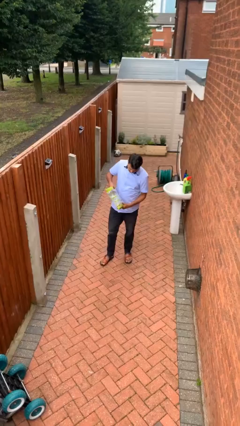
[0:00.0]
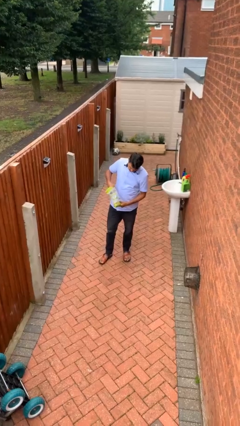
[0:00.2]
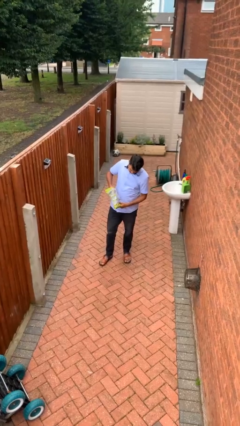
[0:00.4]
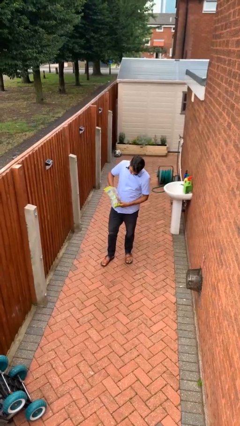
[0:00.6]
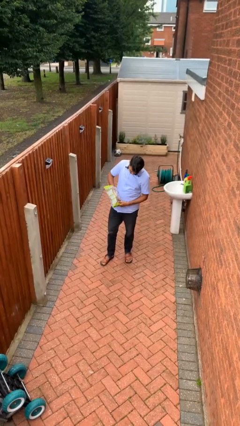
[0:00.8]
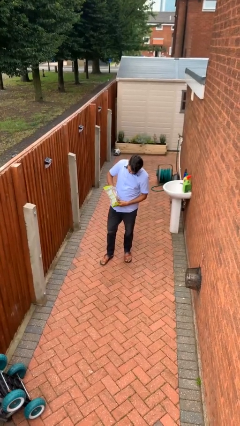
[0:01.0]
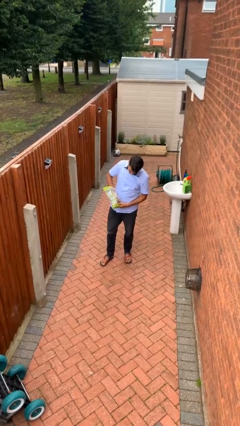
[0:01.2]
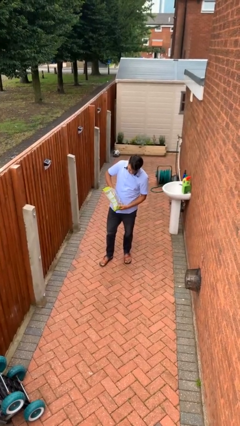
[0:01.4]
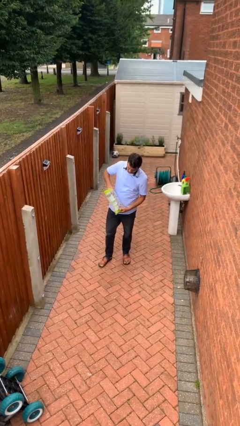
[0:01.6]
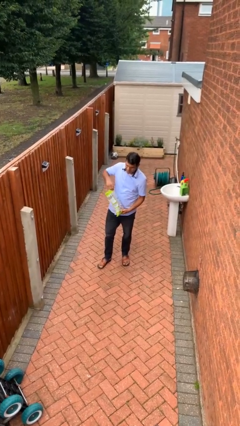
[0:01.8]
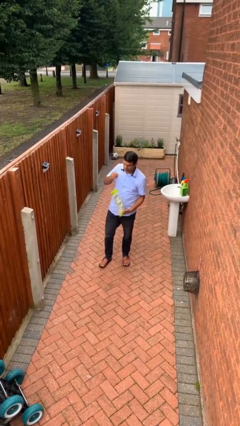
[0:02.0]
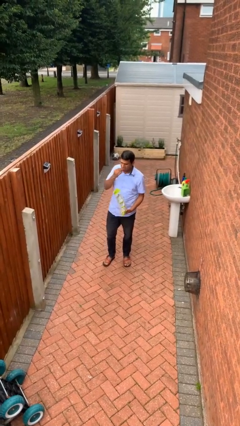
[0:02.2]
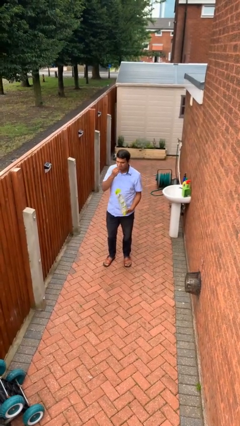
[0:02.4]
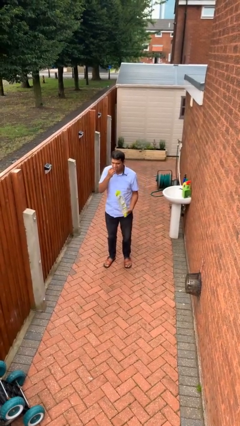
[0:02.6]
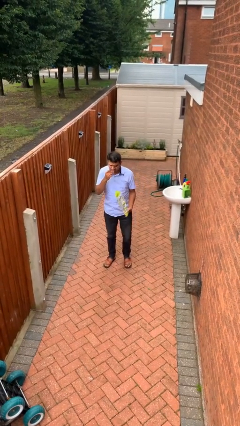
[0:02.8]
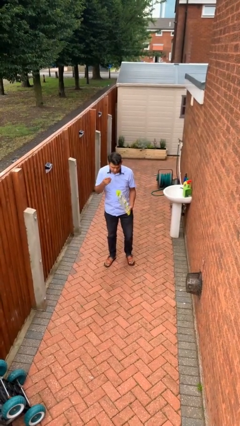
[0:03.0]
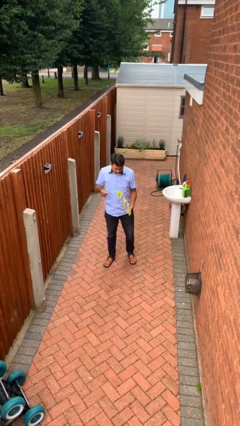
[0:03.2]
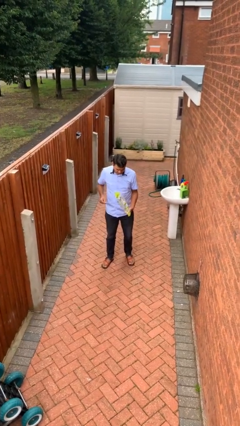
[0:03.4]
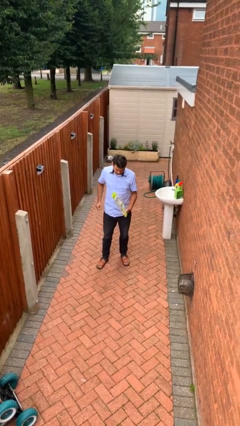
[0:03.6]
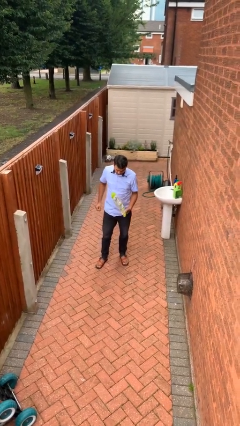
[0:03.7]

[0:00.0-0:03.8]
person eats snack from bag

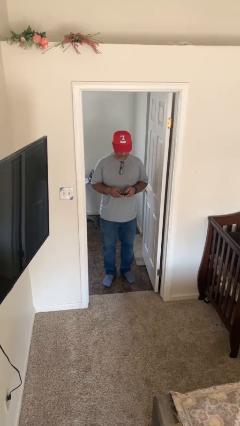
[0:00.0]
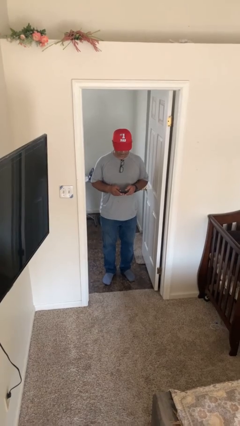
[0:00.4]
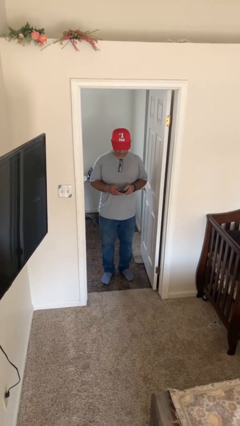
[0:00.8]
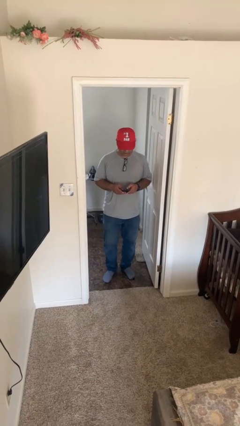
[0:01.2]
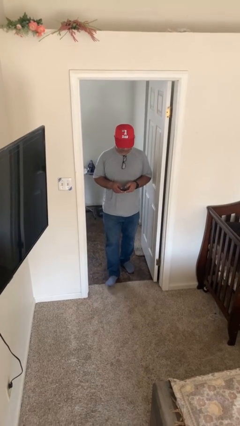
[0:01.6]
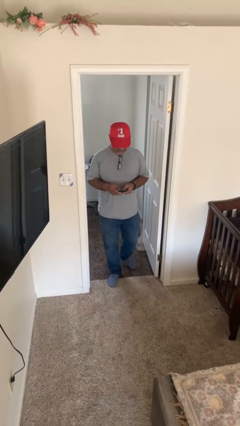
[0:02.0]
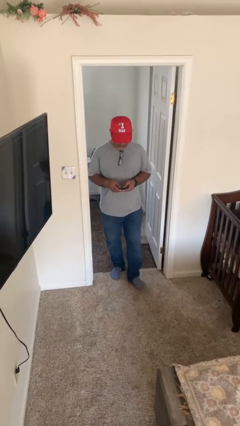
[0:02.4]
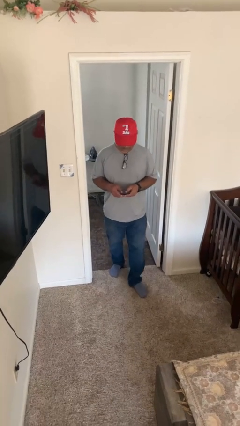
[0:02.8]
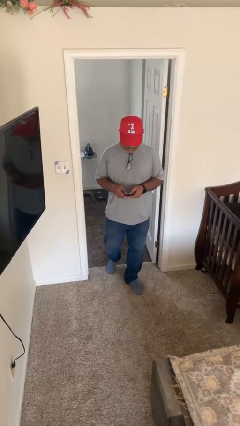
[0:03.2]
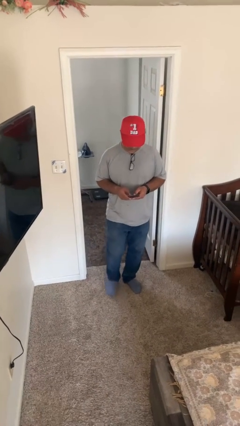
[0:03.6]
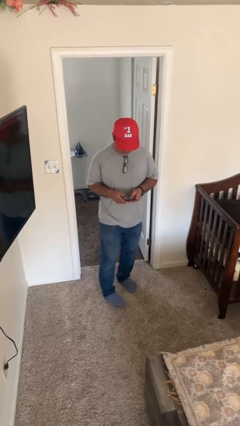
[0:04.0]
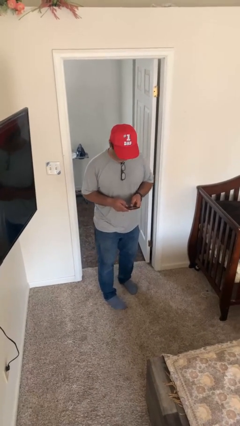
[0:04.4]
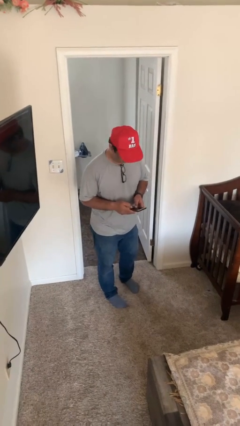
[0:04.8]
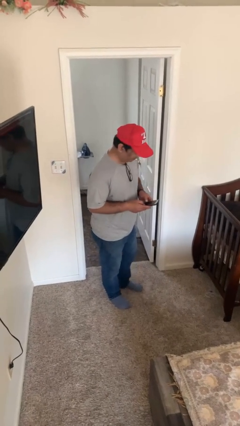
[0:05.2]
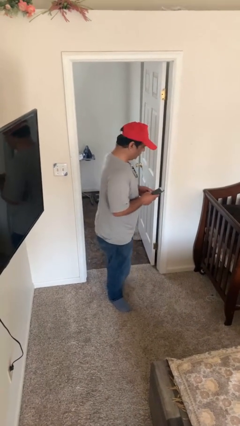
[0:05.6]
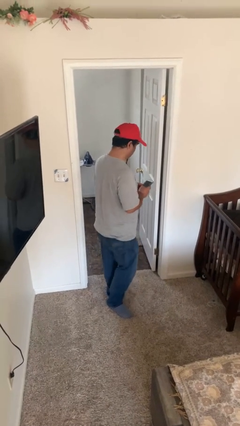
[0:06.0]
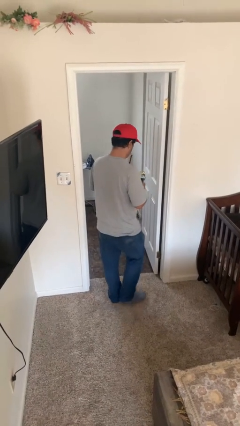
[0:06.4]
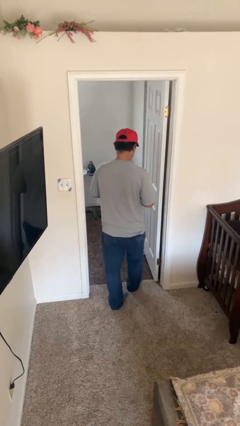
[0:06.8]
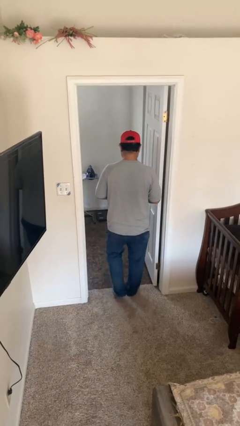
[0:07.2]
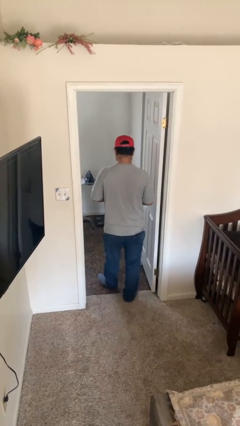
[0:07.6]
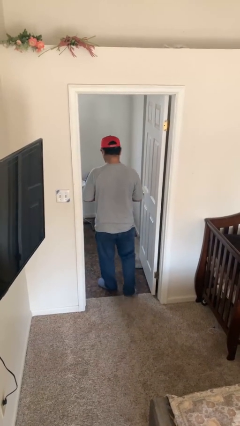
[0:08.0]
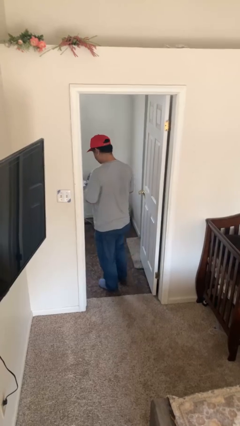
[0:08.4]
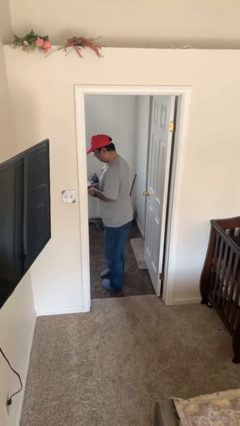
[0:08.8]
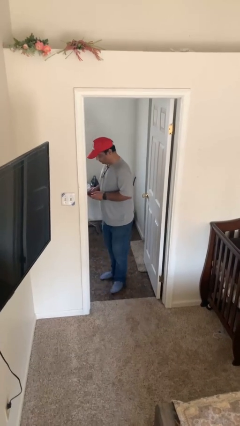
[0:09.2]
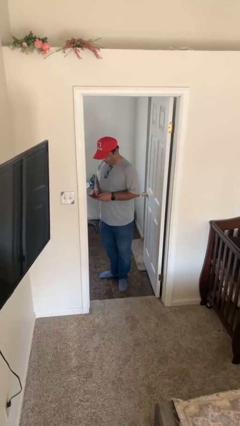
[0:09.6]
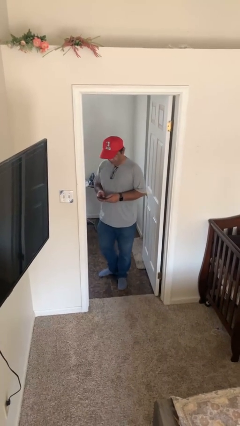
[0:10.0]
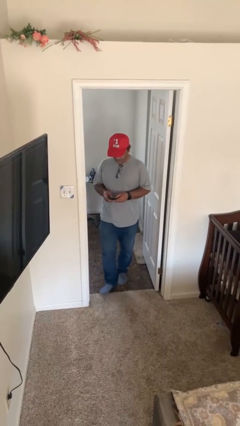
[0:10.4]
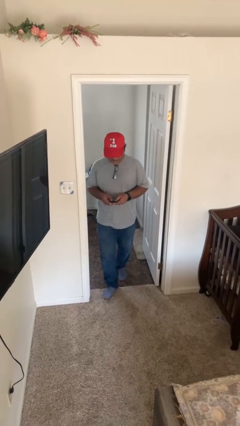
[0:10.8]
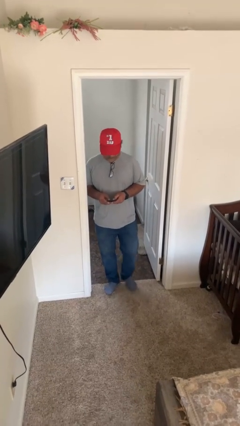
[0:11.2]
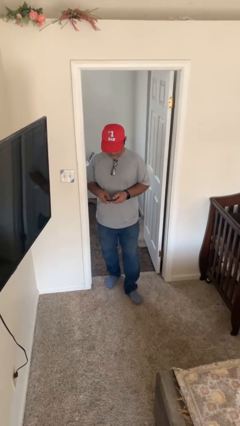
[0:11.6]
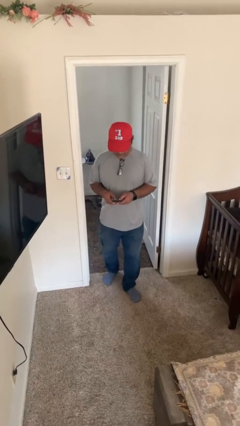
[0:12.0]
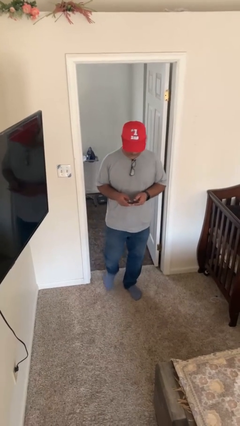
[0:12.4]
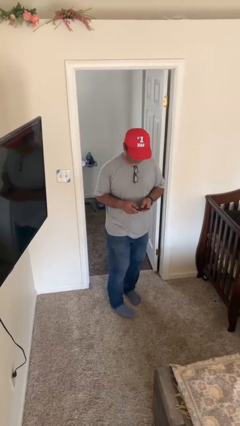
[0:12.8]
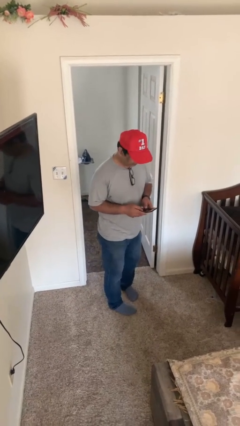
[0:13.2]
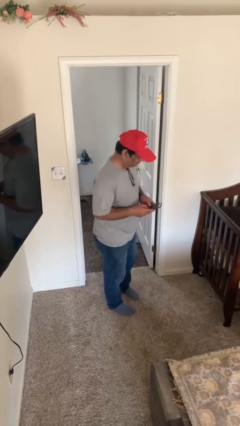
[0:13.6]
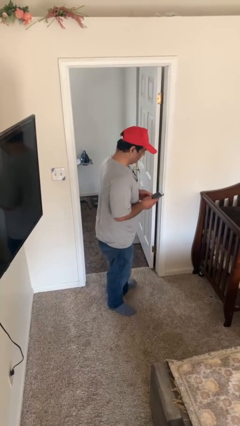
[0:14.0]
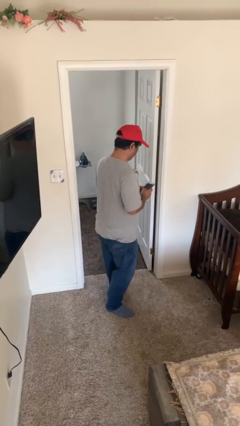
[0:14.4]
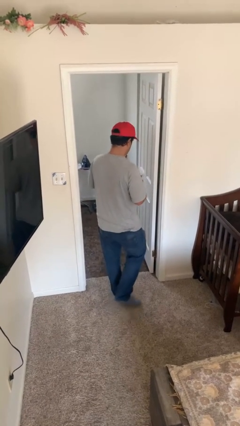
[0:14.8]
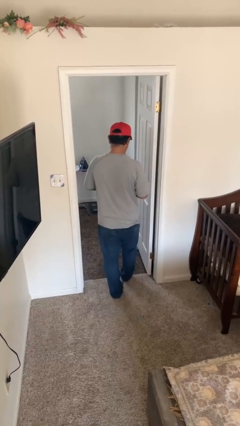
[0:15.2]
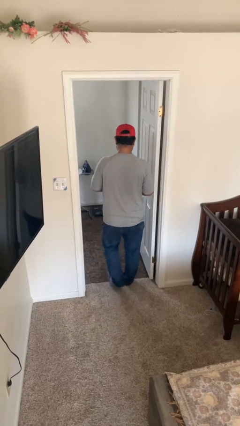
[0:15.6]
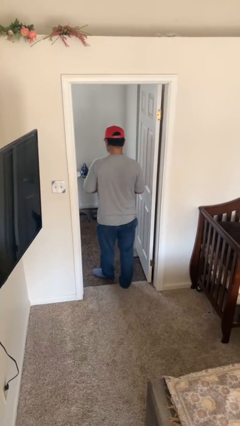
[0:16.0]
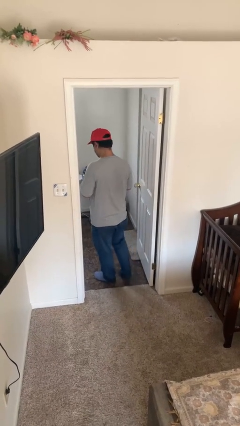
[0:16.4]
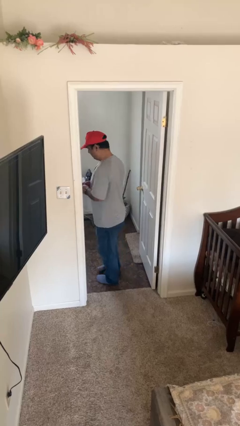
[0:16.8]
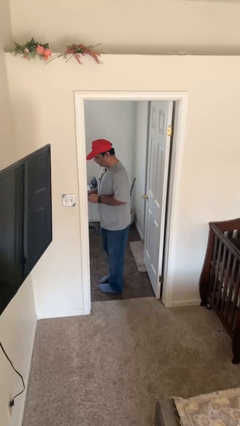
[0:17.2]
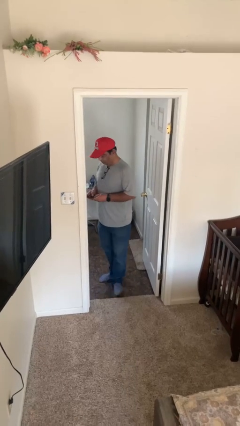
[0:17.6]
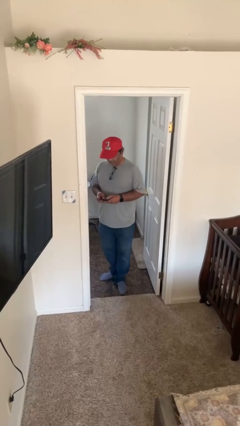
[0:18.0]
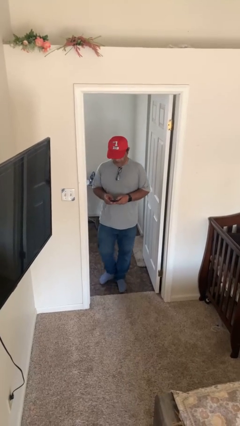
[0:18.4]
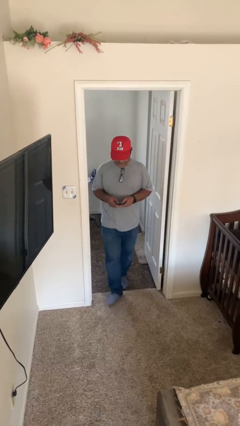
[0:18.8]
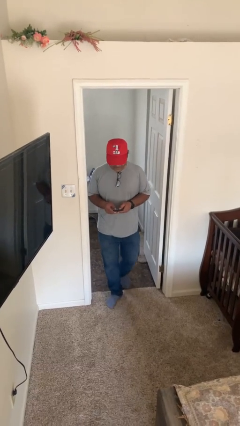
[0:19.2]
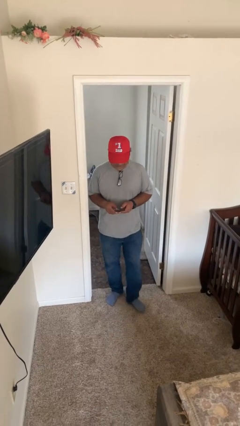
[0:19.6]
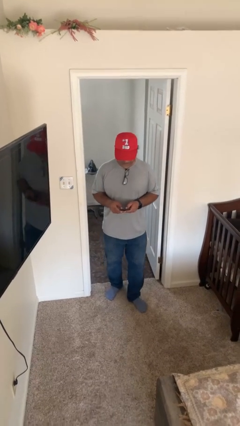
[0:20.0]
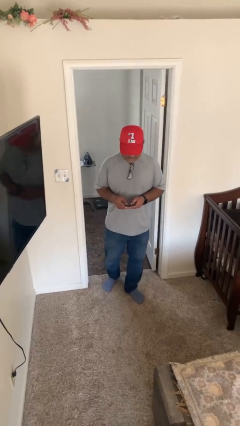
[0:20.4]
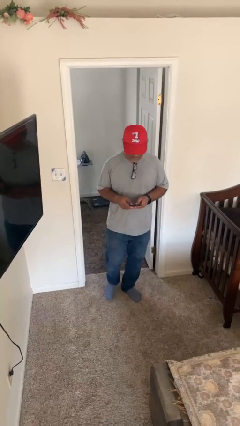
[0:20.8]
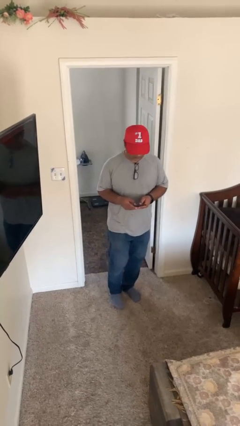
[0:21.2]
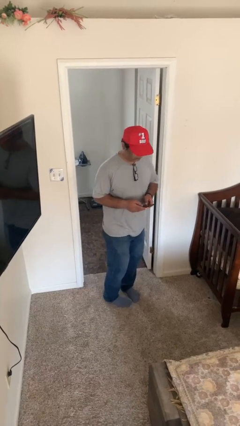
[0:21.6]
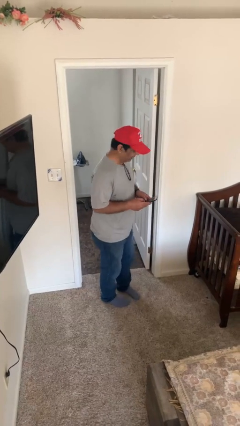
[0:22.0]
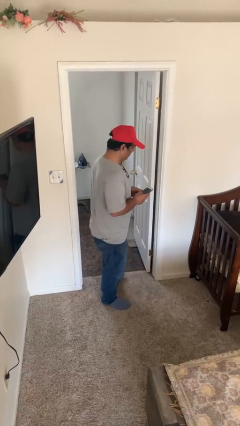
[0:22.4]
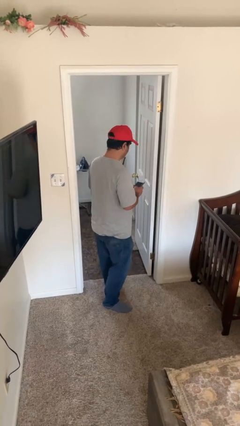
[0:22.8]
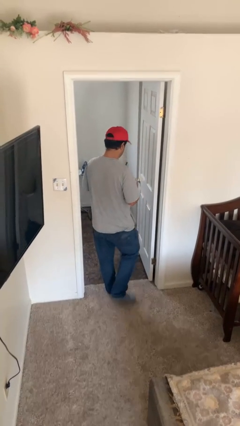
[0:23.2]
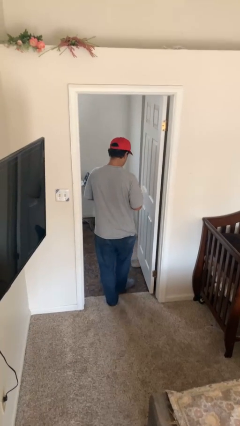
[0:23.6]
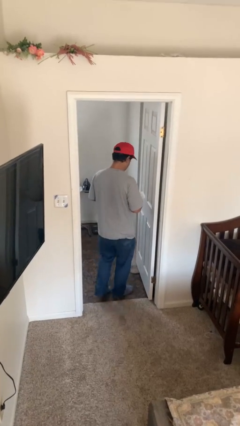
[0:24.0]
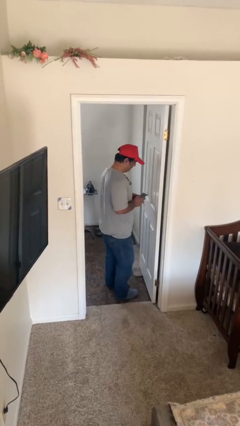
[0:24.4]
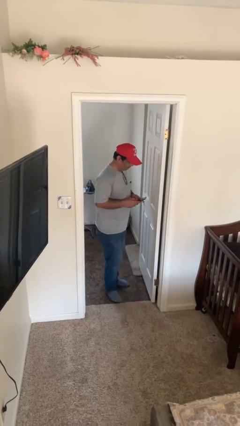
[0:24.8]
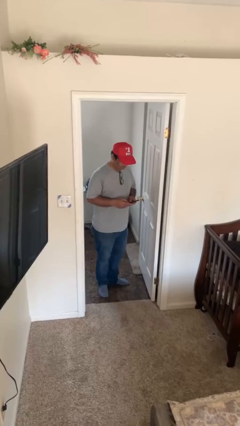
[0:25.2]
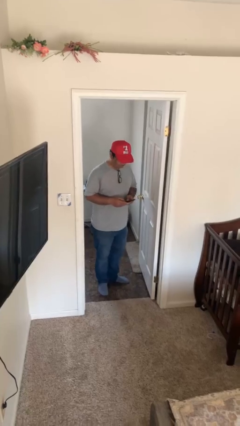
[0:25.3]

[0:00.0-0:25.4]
person texts on phone

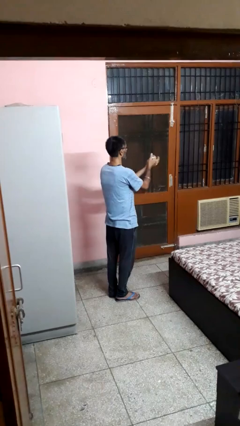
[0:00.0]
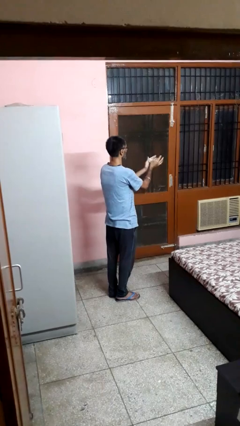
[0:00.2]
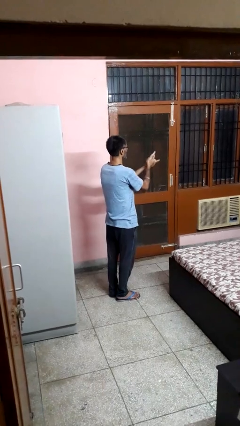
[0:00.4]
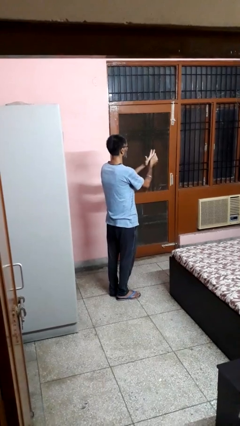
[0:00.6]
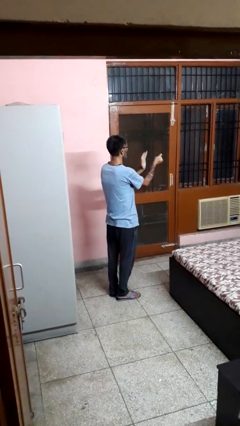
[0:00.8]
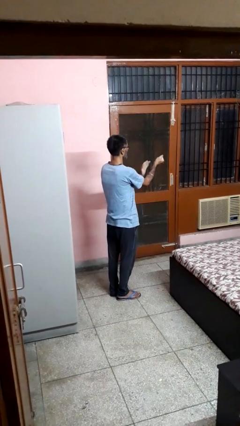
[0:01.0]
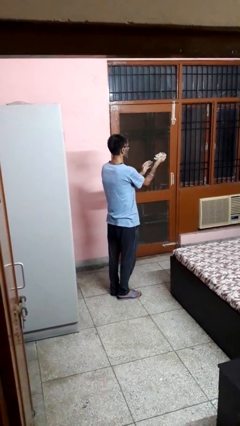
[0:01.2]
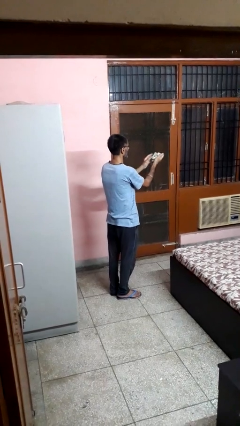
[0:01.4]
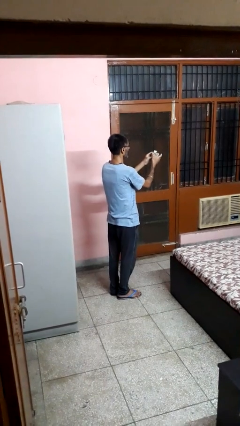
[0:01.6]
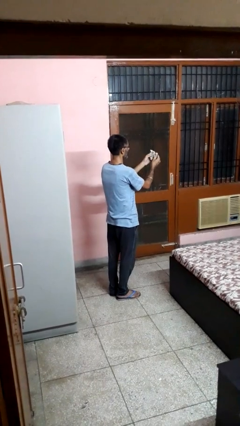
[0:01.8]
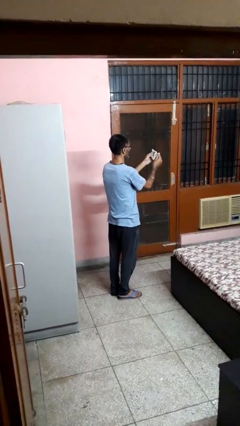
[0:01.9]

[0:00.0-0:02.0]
person crumples paper
